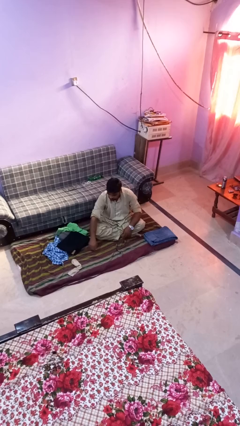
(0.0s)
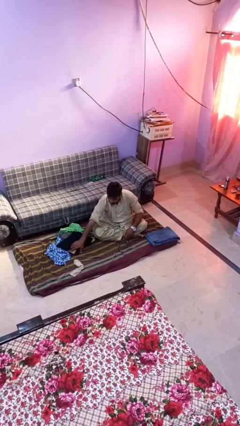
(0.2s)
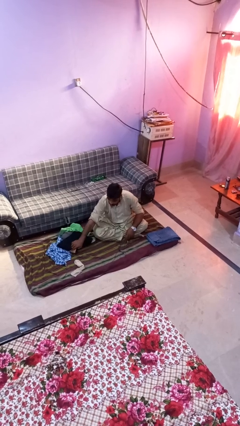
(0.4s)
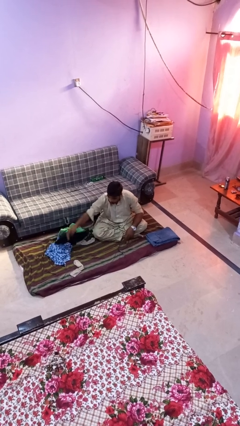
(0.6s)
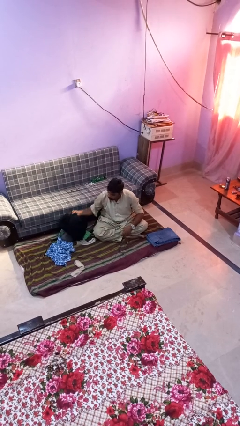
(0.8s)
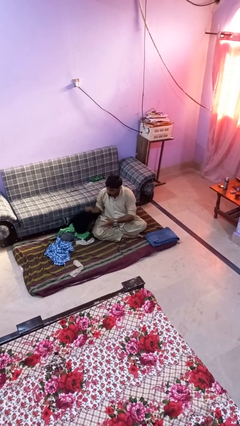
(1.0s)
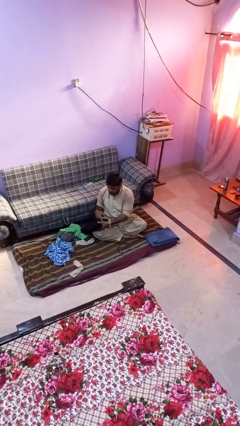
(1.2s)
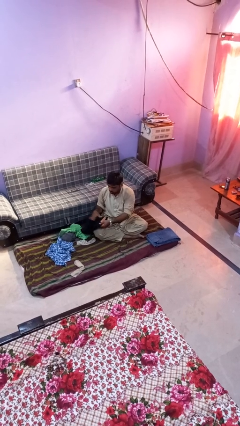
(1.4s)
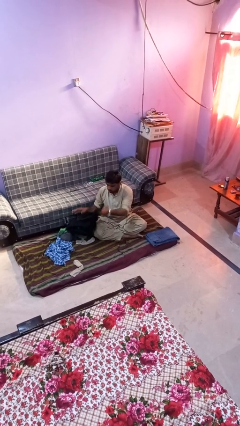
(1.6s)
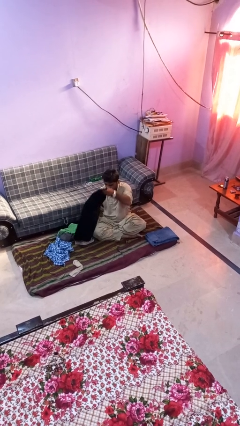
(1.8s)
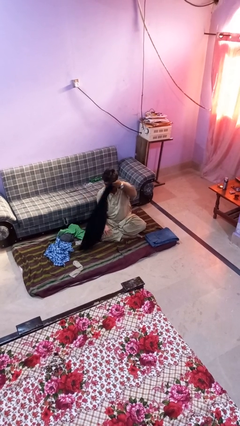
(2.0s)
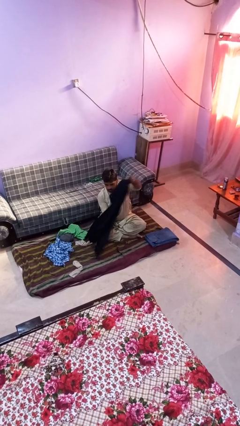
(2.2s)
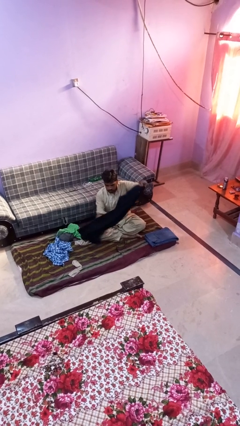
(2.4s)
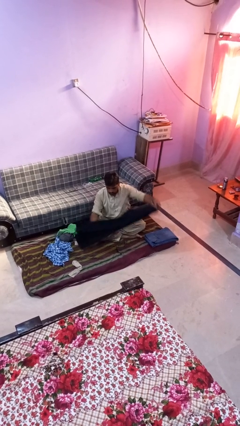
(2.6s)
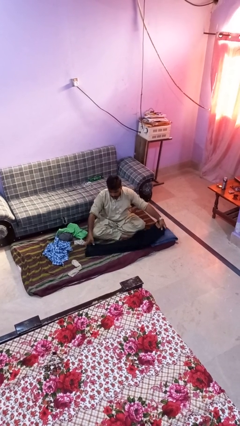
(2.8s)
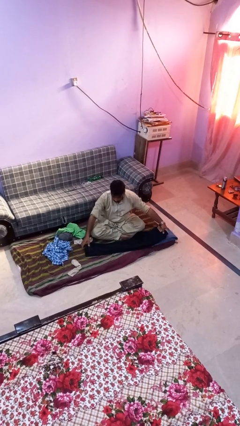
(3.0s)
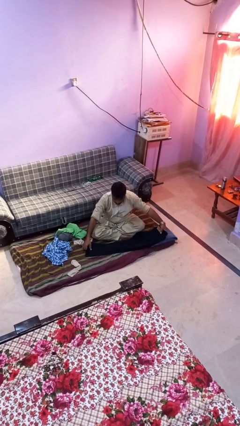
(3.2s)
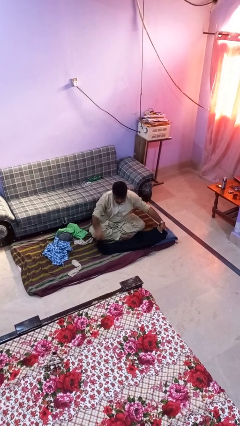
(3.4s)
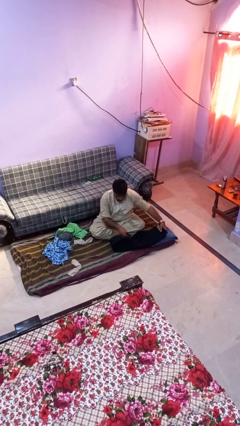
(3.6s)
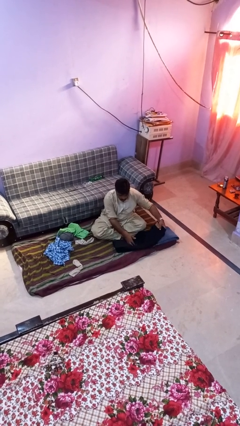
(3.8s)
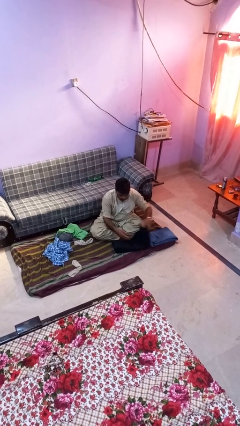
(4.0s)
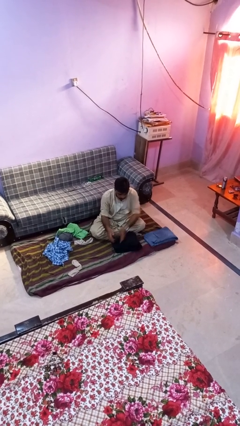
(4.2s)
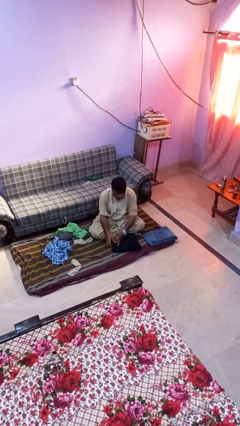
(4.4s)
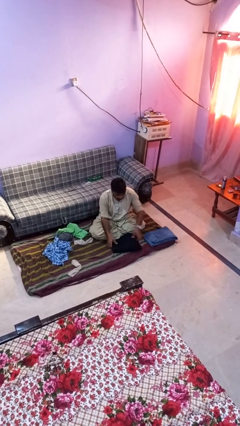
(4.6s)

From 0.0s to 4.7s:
person folds pants

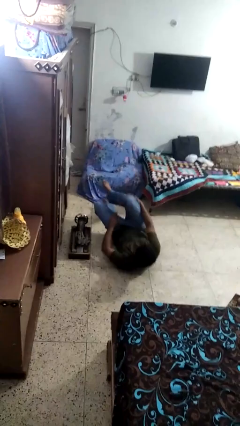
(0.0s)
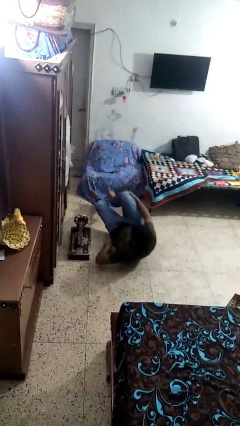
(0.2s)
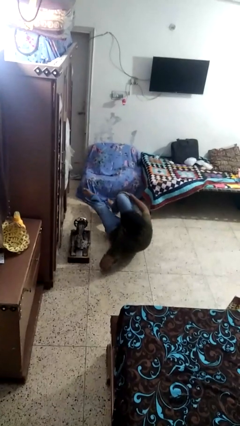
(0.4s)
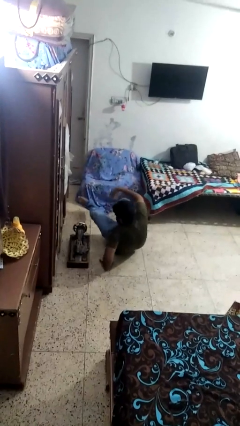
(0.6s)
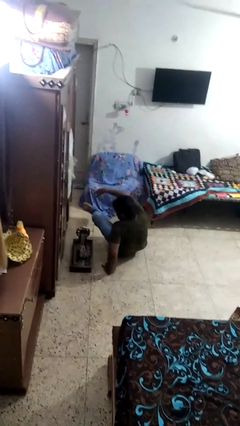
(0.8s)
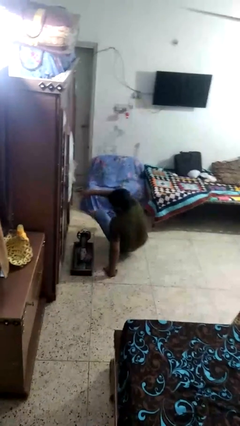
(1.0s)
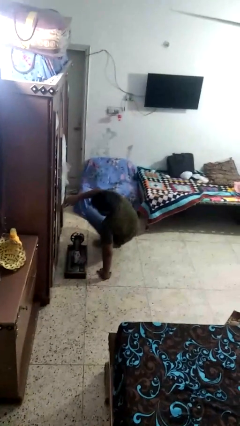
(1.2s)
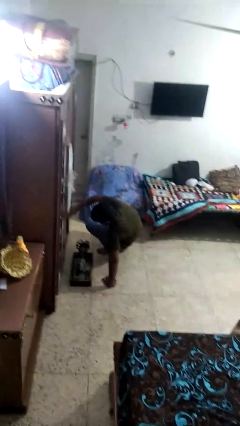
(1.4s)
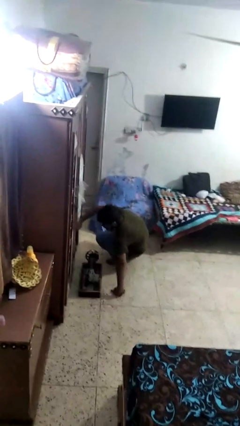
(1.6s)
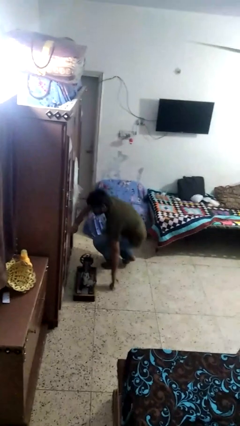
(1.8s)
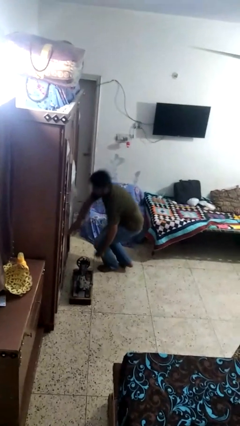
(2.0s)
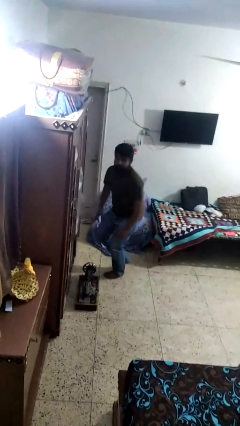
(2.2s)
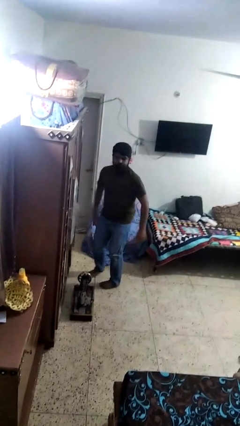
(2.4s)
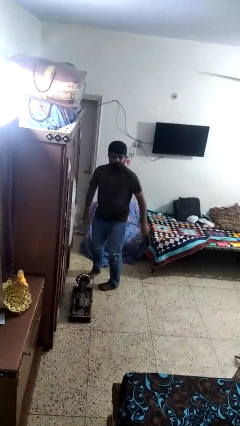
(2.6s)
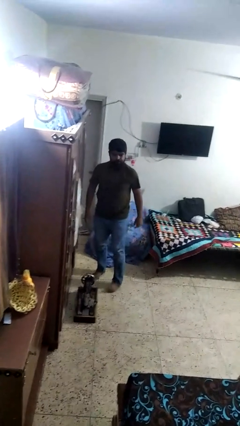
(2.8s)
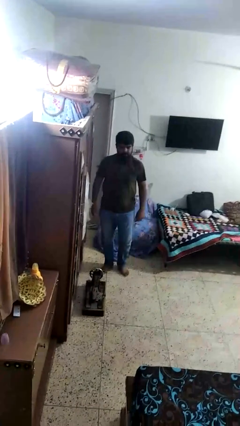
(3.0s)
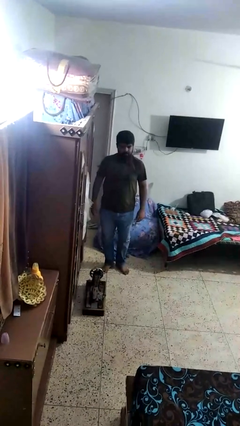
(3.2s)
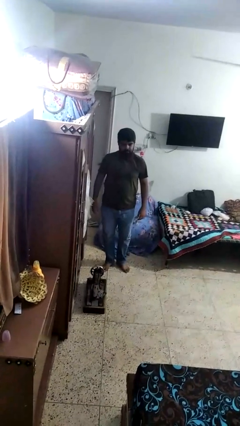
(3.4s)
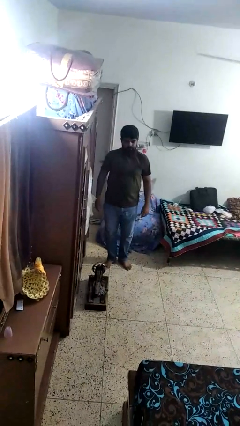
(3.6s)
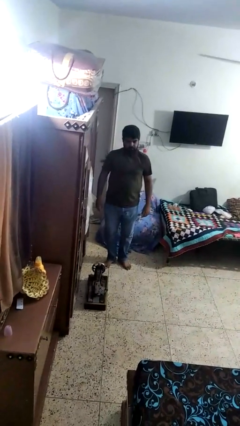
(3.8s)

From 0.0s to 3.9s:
person stands up from floor

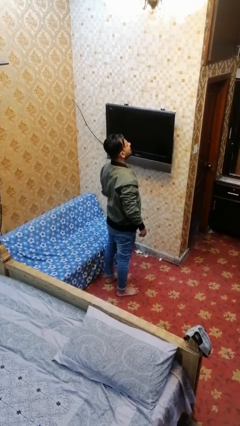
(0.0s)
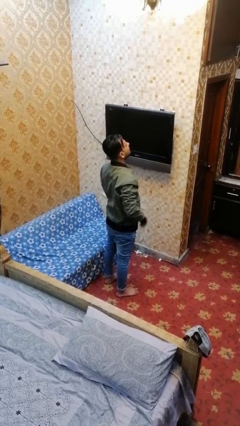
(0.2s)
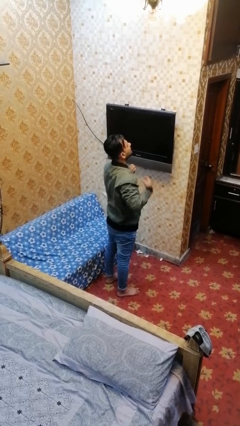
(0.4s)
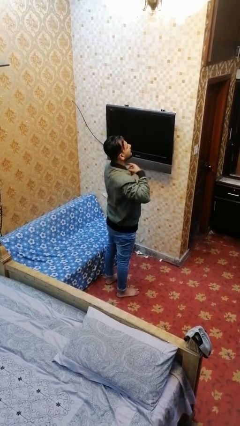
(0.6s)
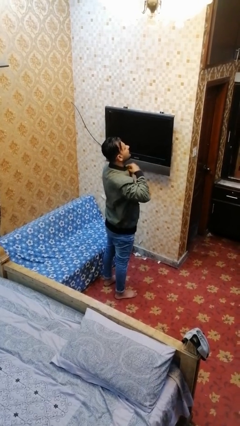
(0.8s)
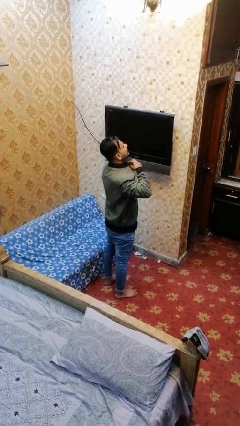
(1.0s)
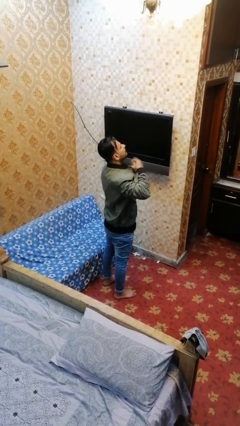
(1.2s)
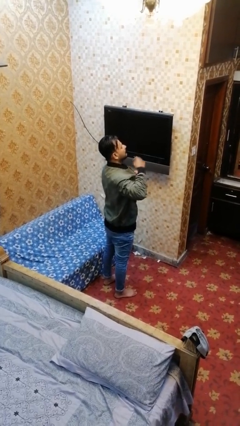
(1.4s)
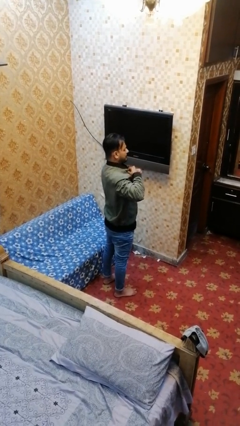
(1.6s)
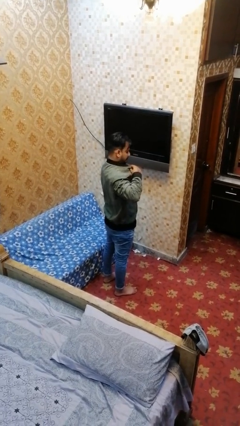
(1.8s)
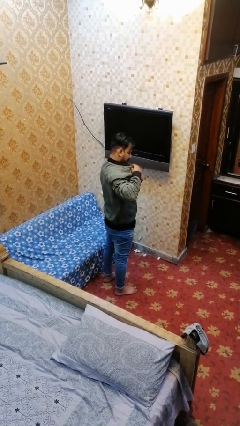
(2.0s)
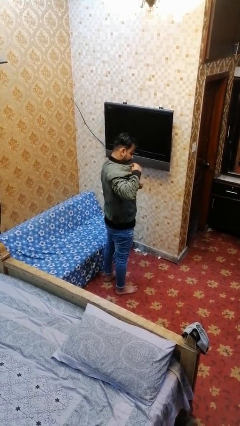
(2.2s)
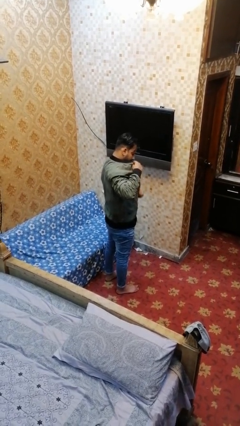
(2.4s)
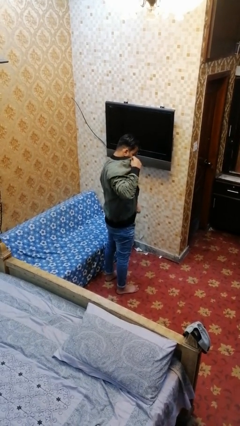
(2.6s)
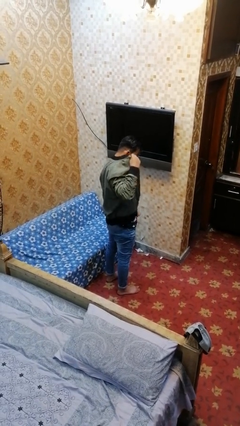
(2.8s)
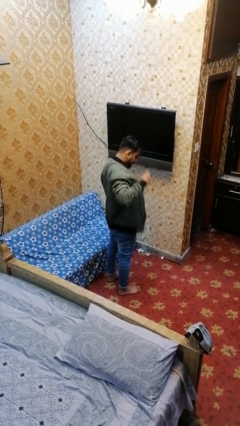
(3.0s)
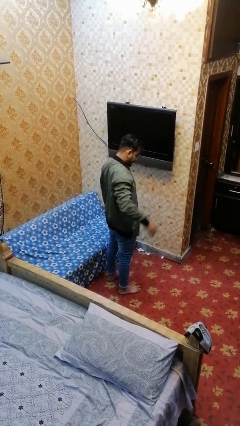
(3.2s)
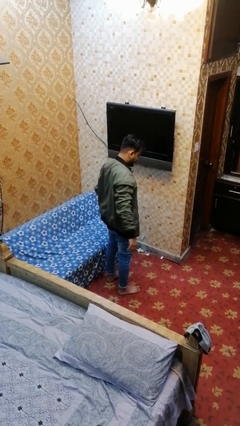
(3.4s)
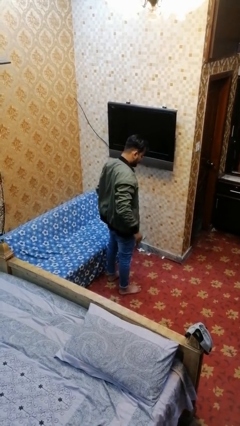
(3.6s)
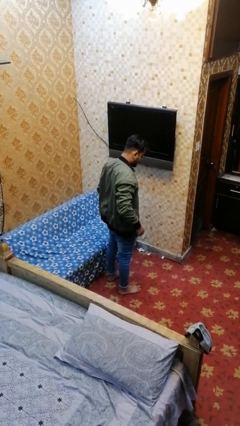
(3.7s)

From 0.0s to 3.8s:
person unzips jacket

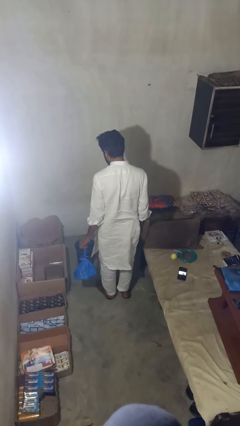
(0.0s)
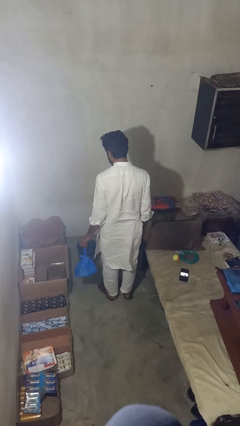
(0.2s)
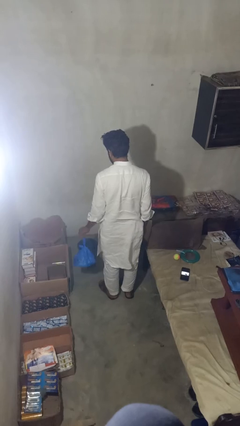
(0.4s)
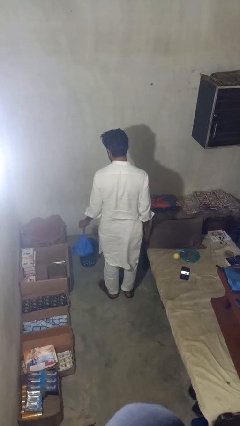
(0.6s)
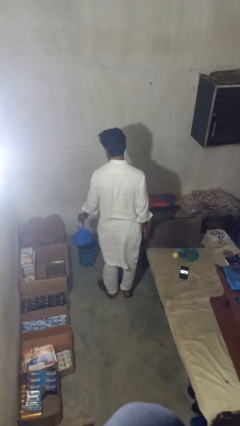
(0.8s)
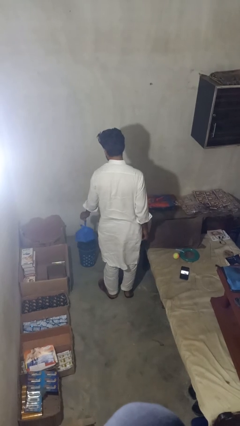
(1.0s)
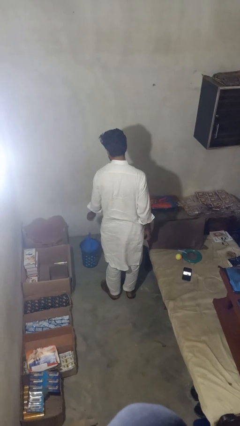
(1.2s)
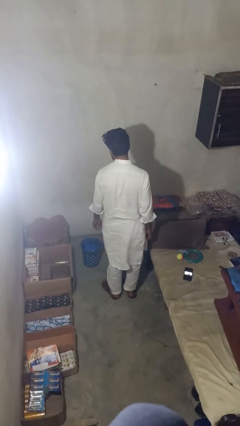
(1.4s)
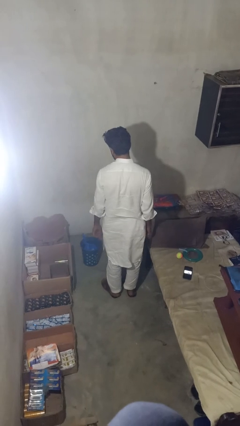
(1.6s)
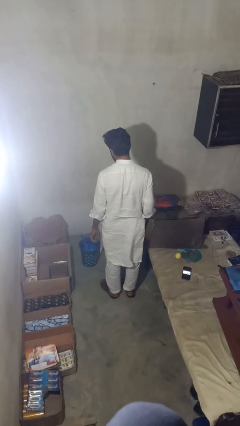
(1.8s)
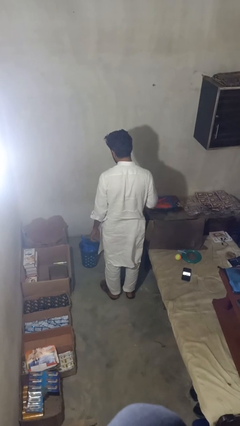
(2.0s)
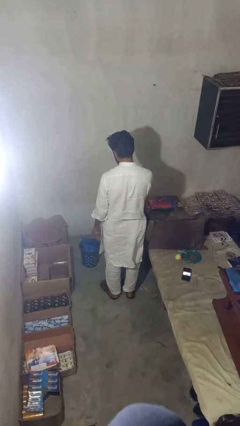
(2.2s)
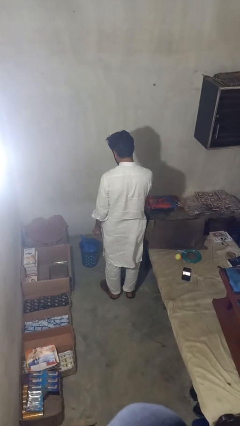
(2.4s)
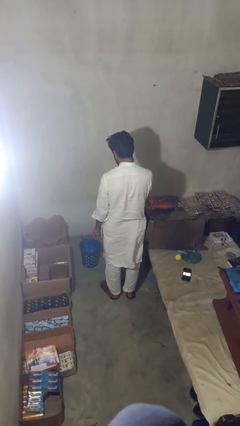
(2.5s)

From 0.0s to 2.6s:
person puts object into basket

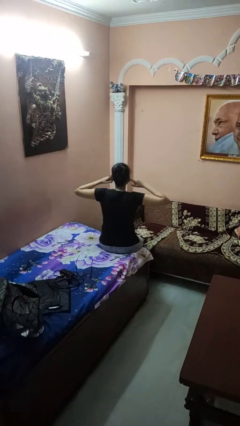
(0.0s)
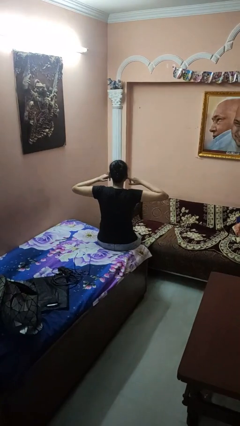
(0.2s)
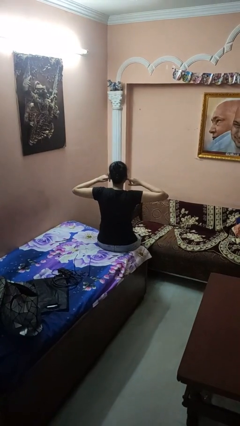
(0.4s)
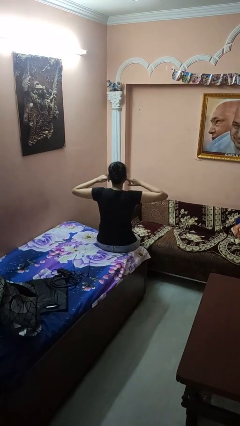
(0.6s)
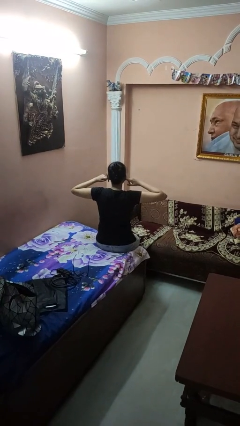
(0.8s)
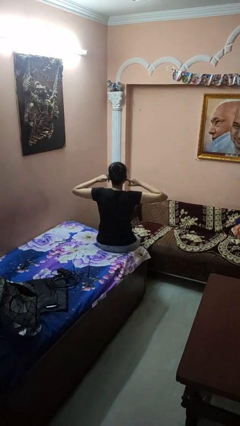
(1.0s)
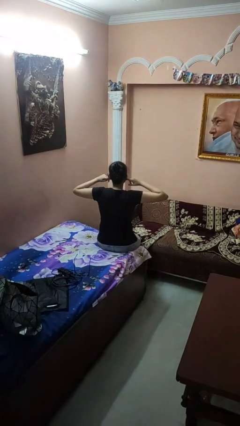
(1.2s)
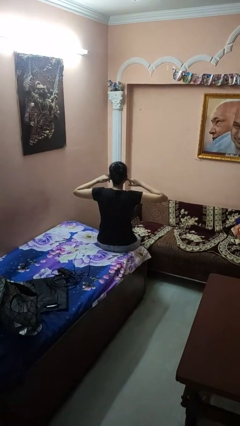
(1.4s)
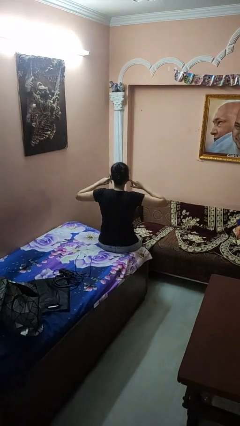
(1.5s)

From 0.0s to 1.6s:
person puts fingers in ear

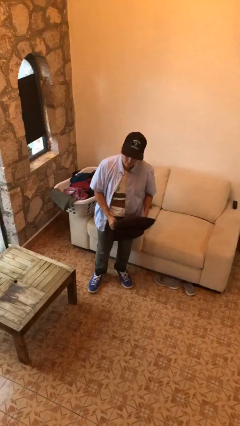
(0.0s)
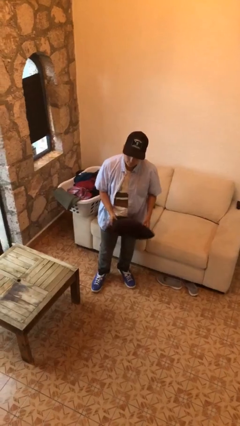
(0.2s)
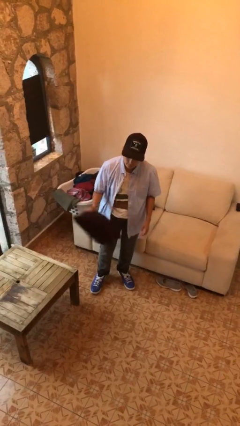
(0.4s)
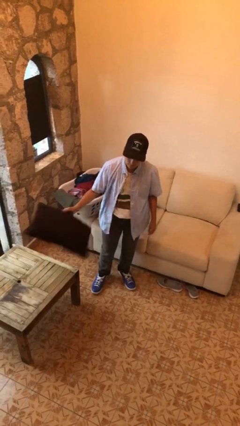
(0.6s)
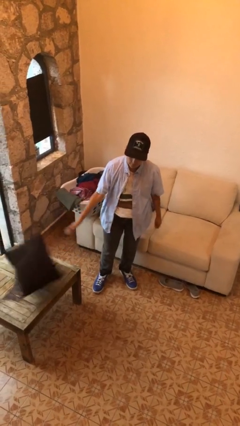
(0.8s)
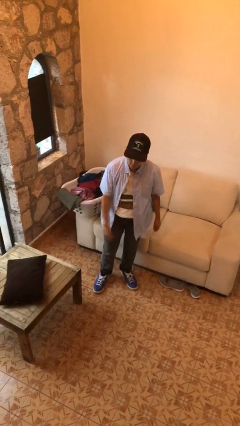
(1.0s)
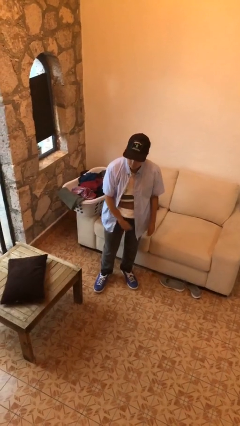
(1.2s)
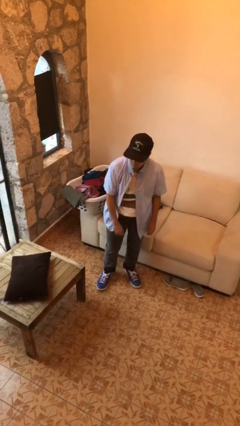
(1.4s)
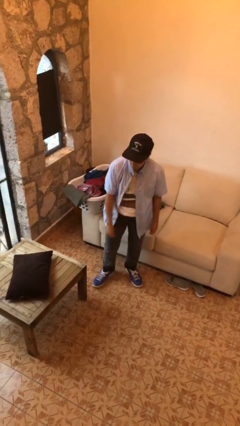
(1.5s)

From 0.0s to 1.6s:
person throws object on table
